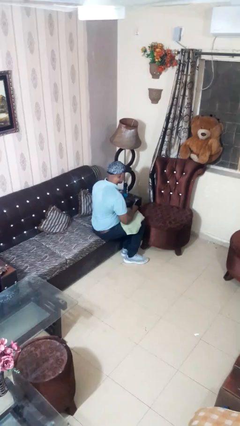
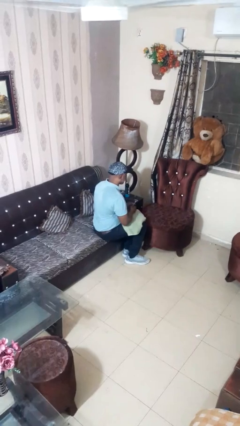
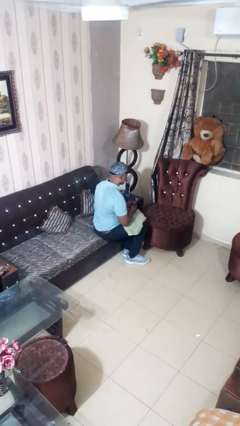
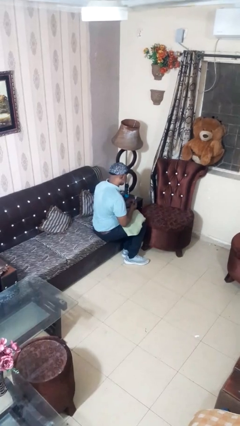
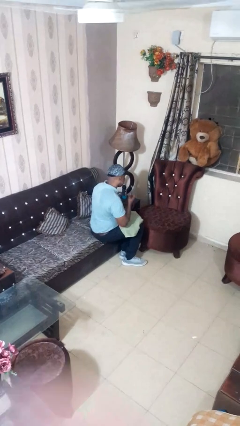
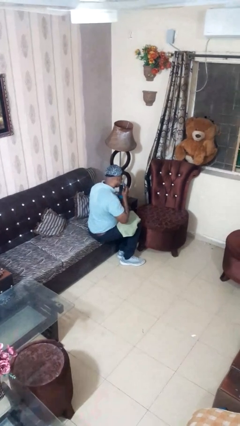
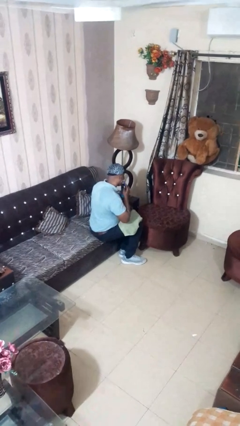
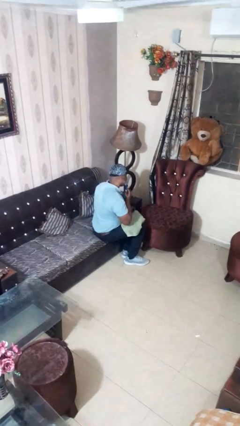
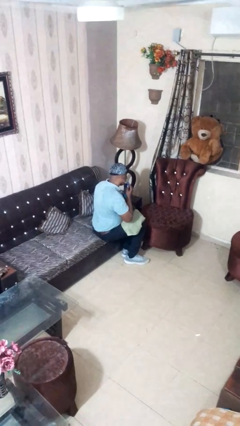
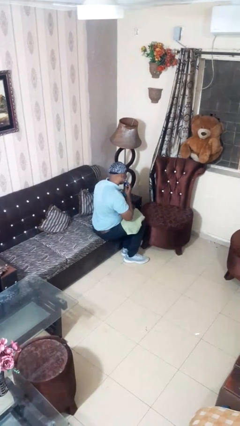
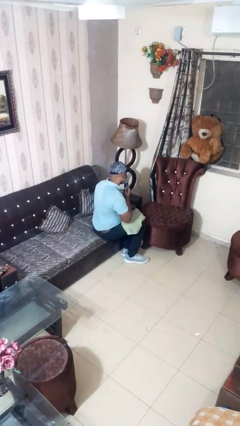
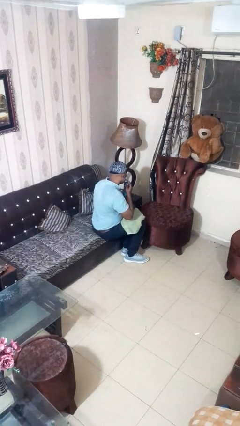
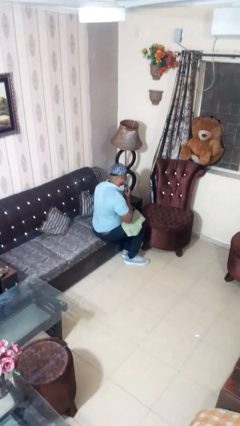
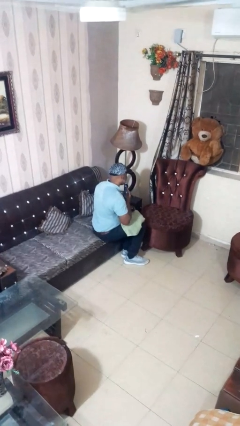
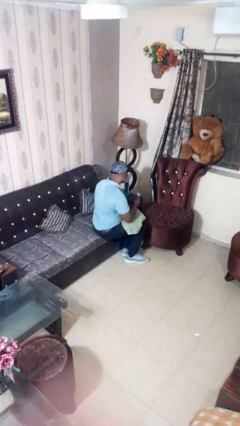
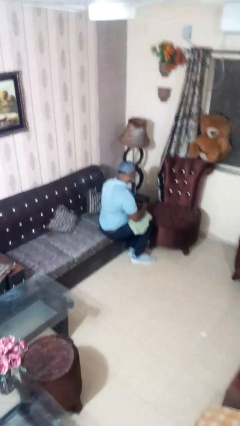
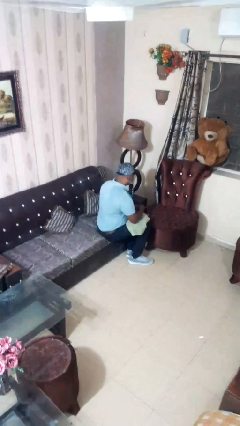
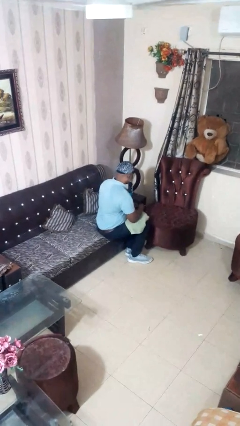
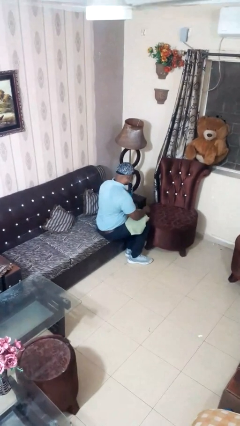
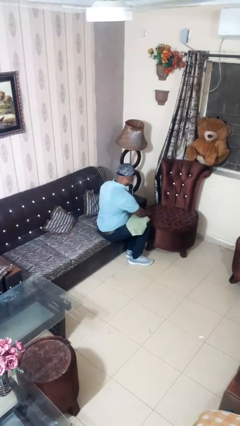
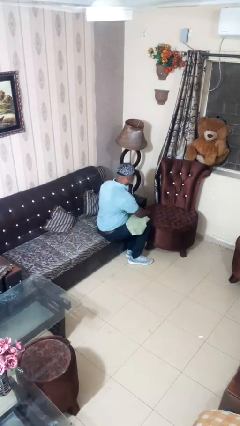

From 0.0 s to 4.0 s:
person shaves face

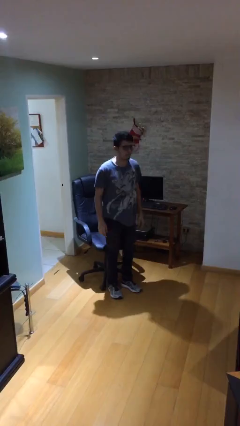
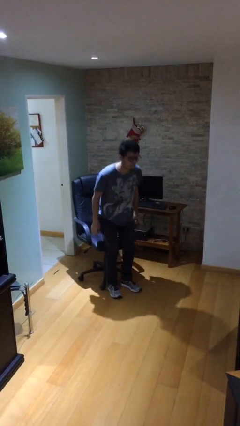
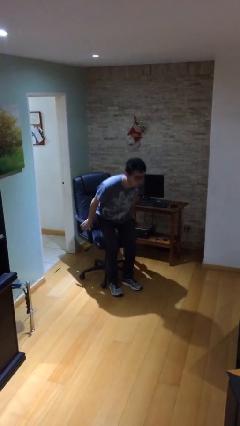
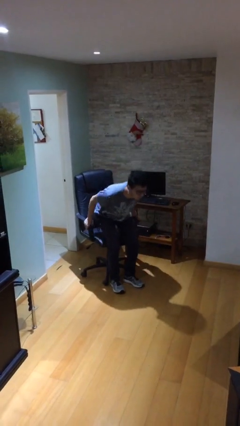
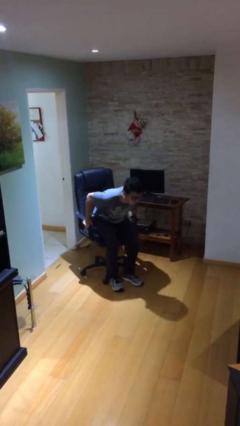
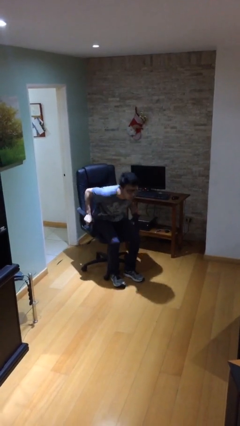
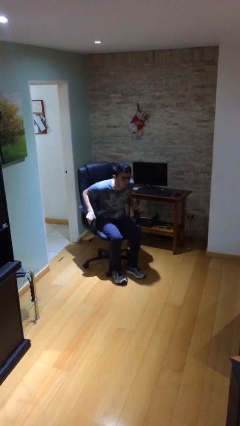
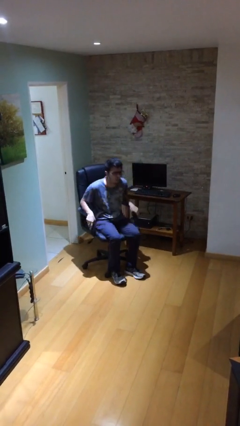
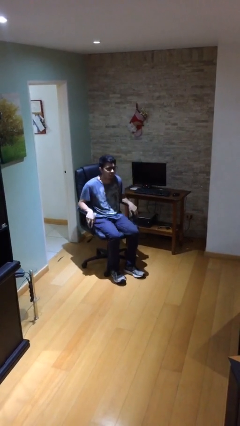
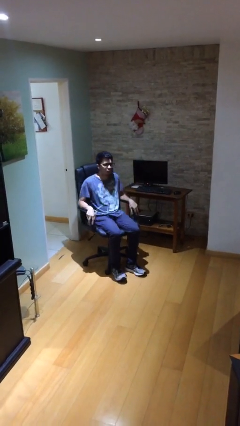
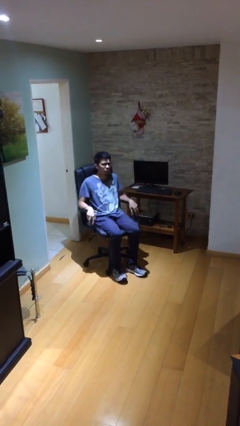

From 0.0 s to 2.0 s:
person sits down

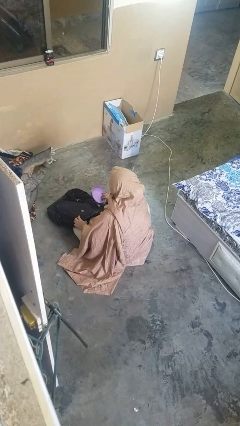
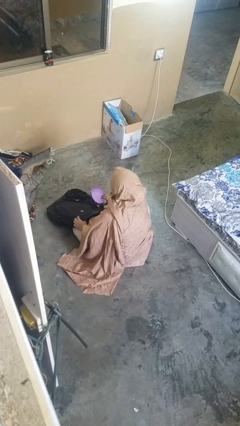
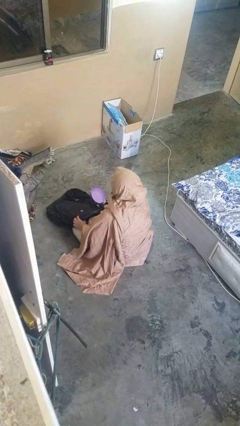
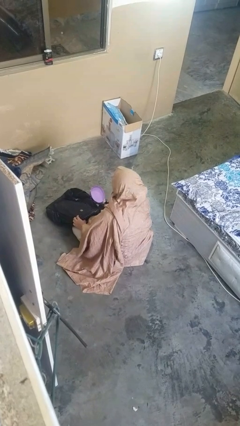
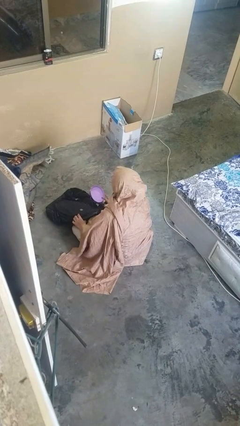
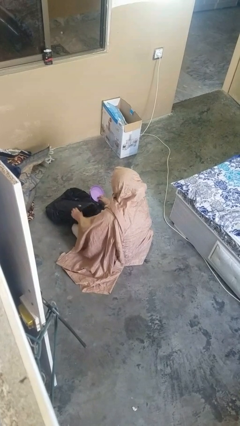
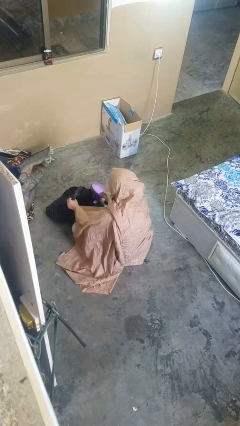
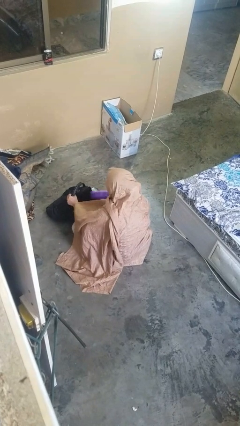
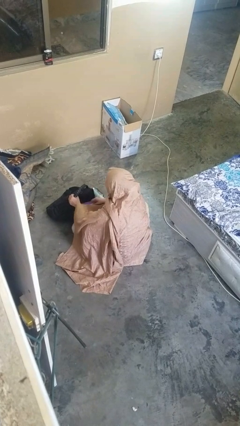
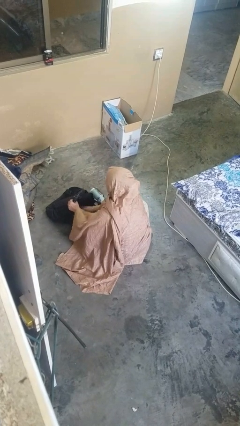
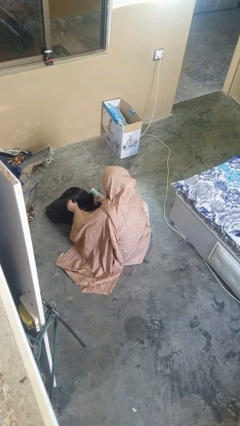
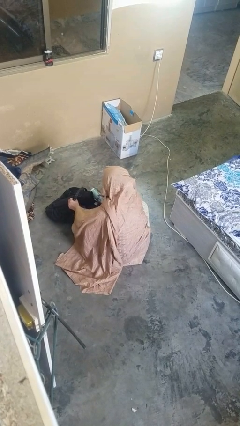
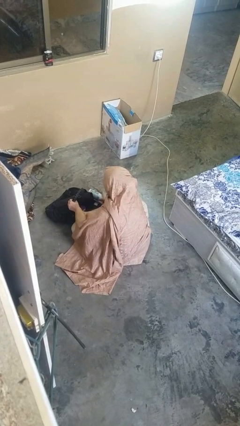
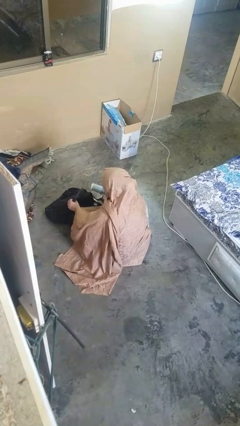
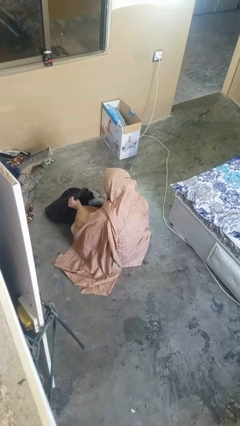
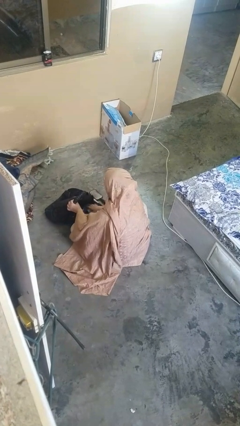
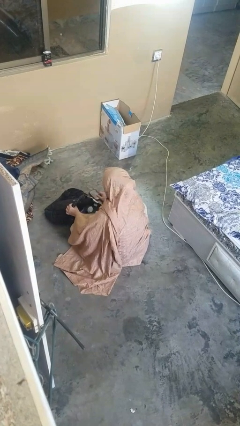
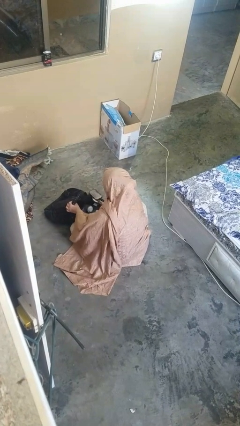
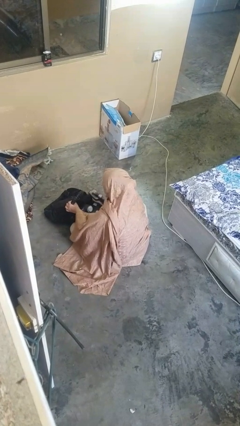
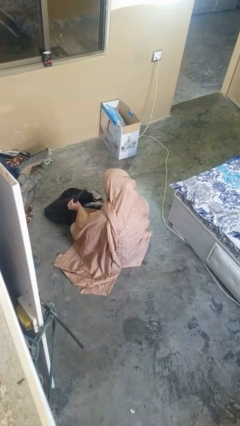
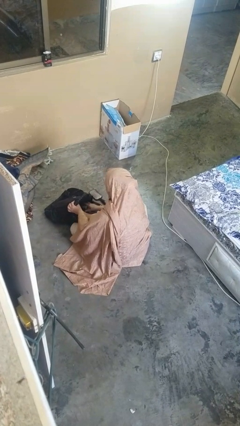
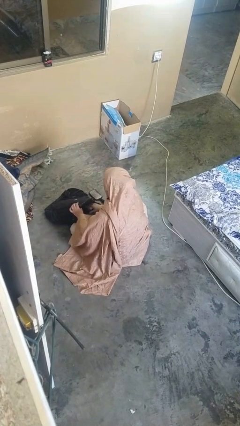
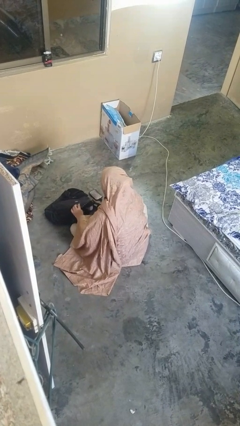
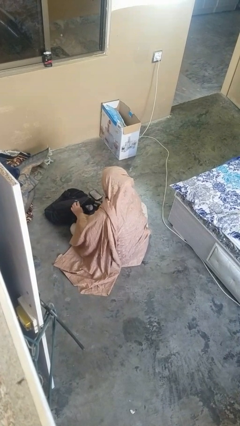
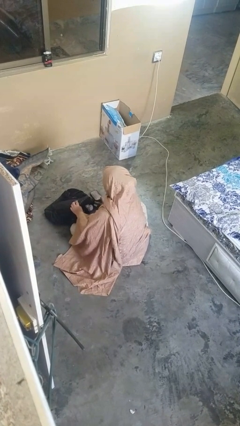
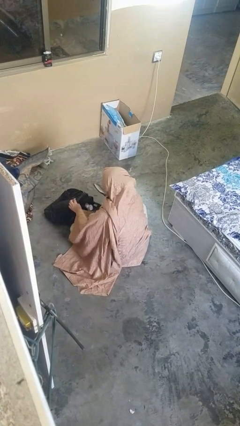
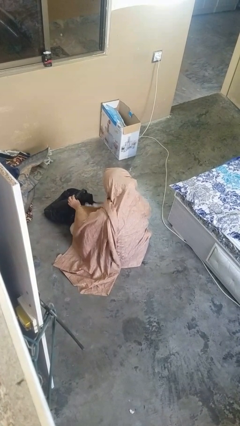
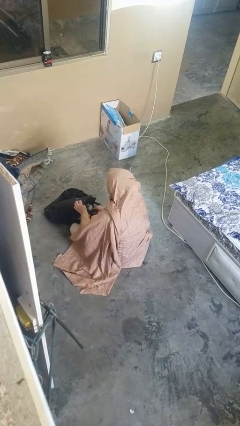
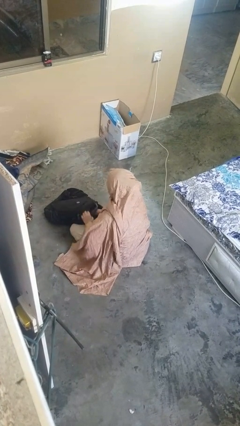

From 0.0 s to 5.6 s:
person puts object into backpack

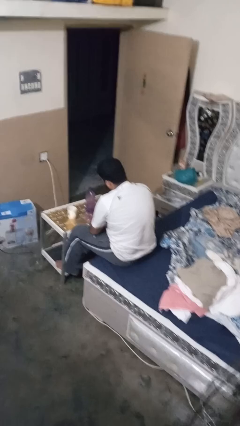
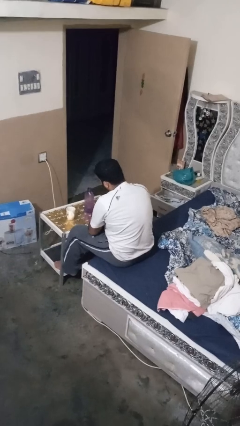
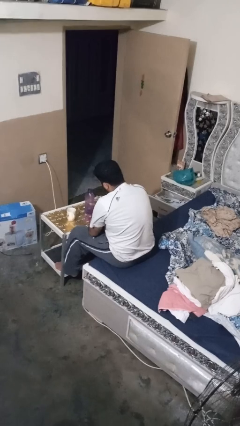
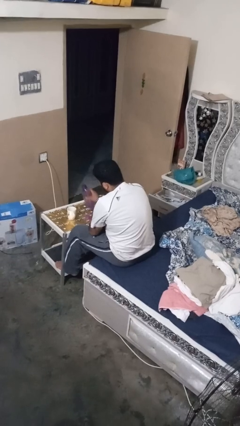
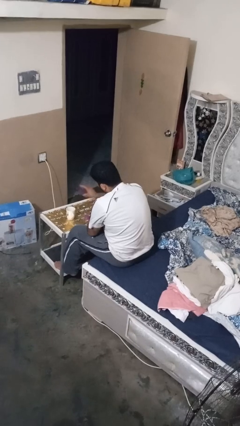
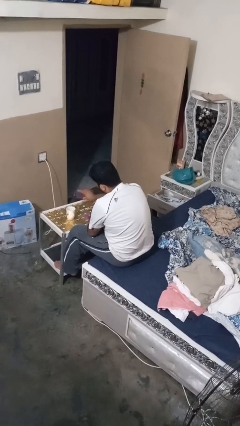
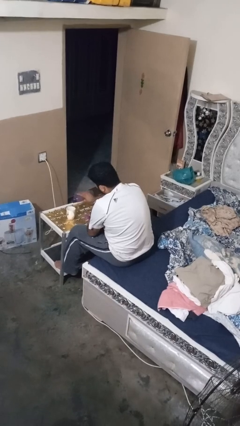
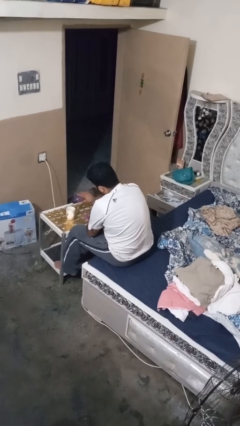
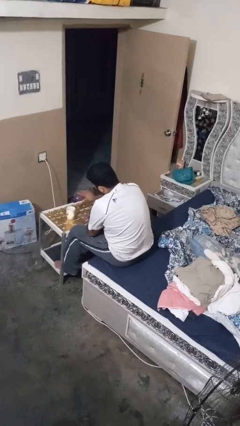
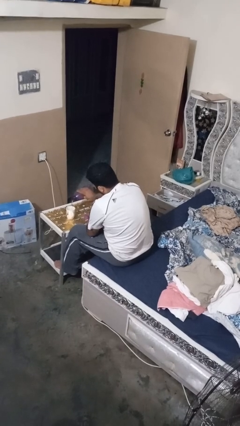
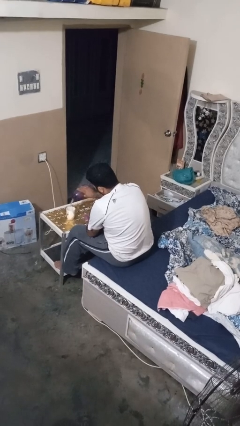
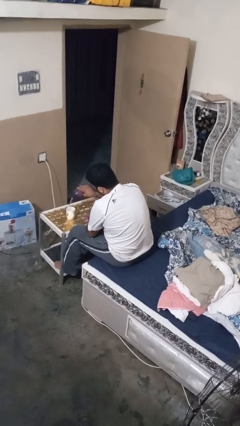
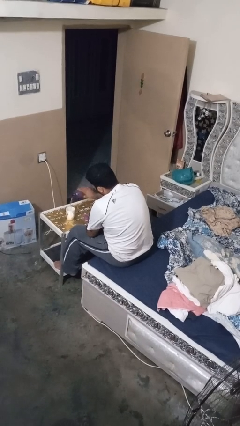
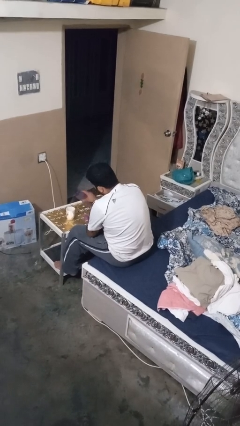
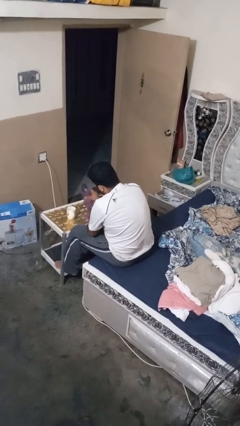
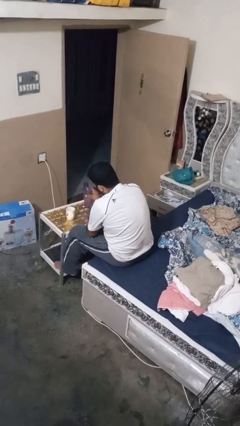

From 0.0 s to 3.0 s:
person pours liquid into cup

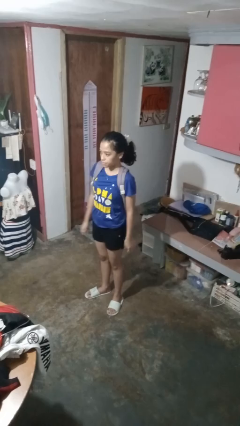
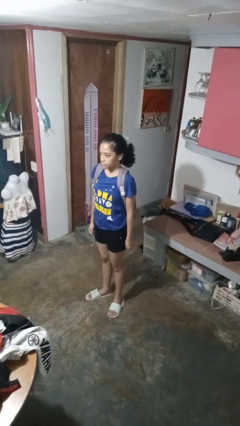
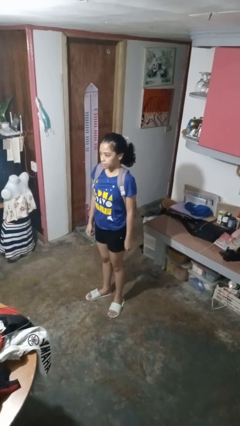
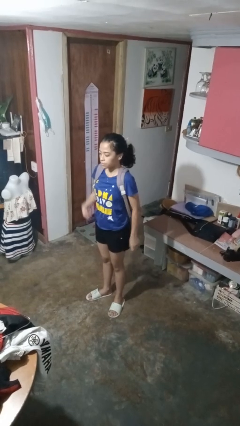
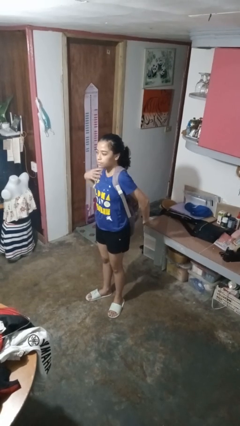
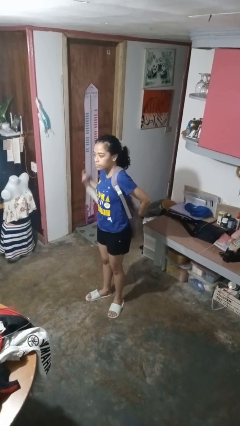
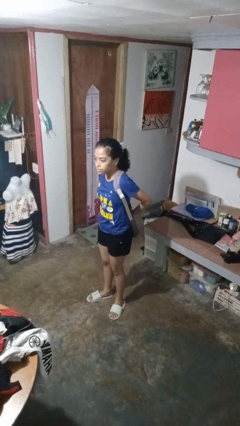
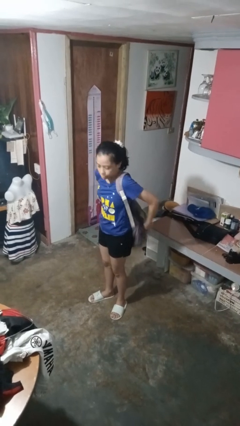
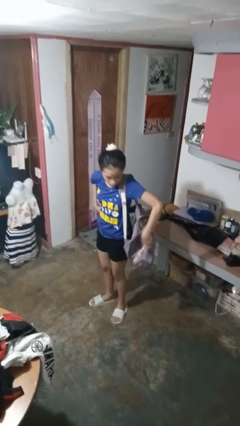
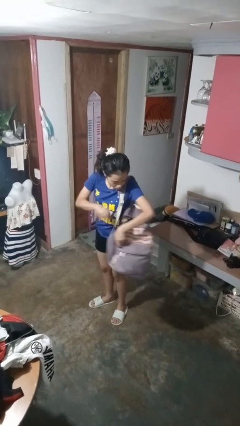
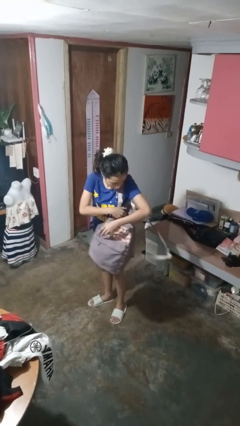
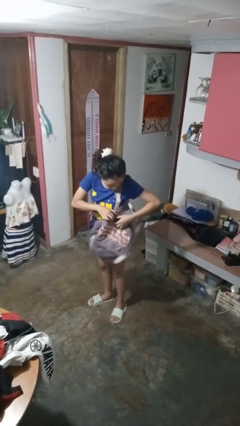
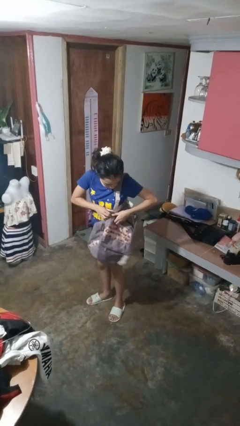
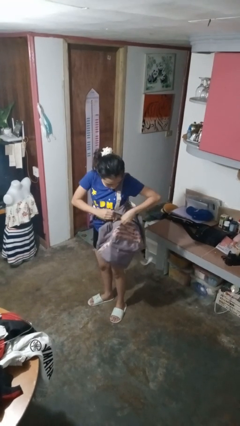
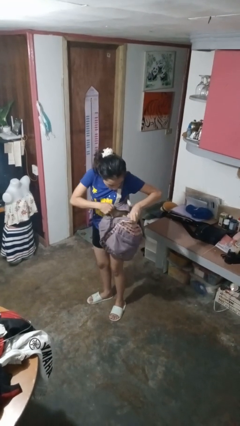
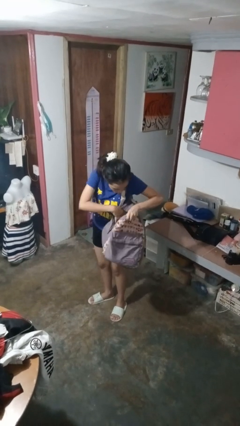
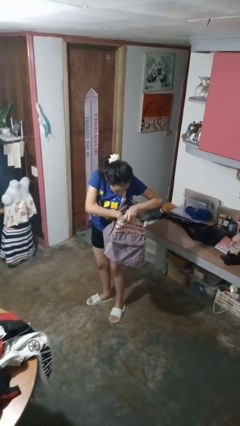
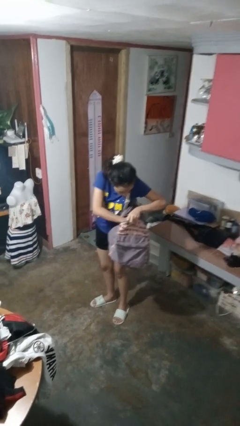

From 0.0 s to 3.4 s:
person searches in backpack
